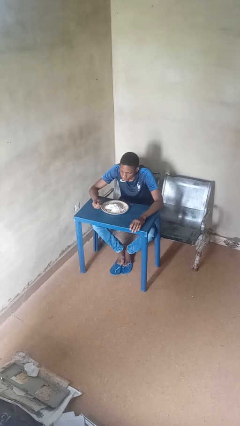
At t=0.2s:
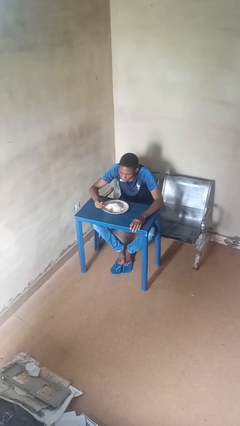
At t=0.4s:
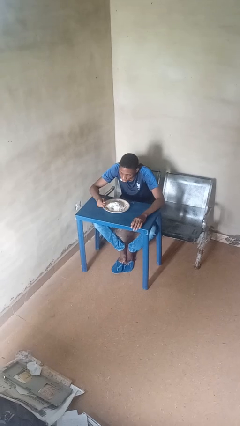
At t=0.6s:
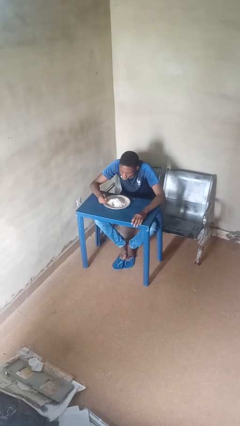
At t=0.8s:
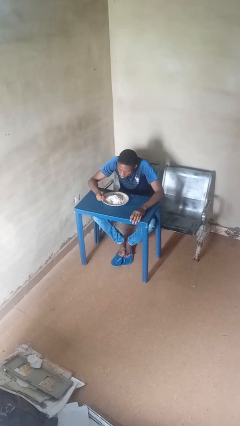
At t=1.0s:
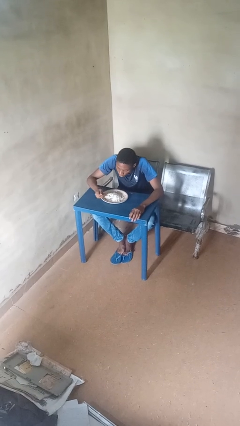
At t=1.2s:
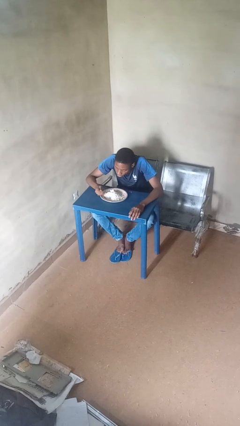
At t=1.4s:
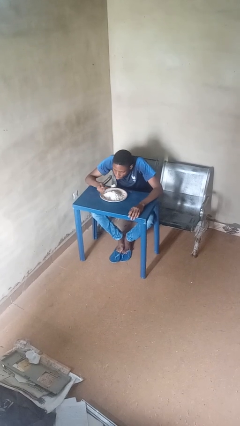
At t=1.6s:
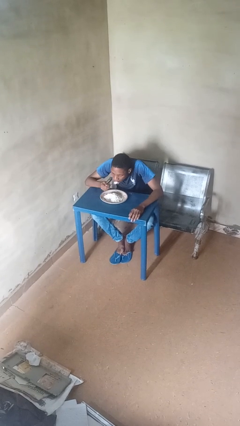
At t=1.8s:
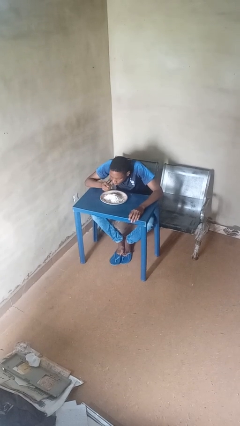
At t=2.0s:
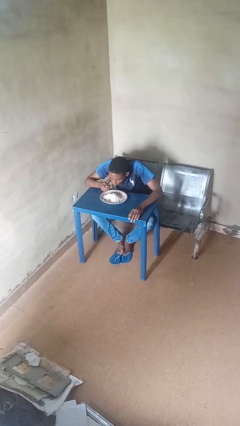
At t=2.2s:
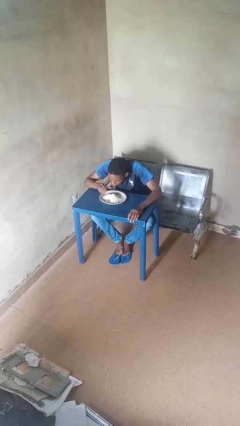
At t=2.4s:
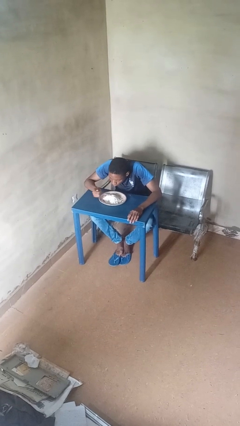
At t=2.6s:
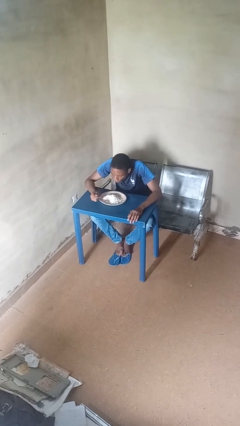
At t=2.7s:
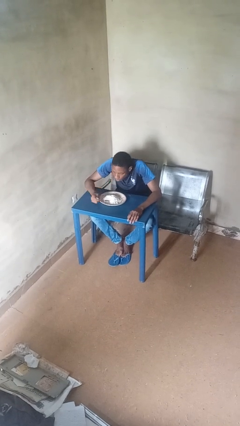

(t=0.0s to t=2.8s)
person eats with utensil

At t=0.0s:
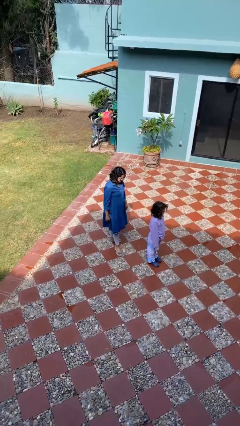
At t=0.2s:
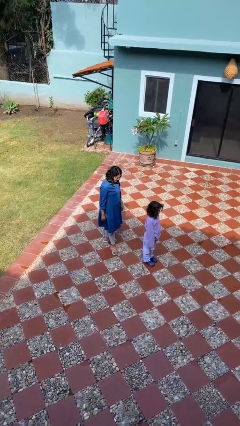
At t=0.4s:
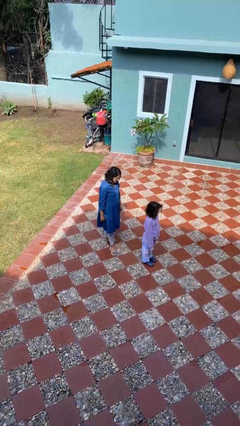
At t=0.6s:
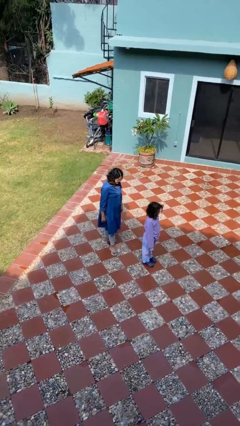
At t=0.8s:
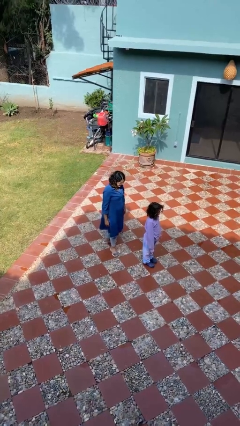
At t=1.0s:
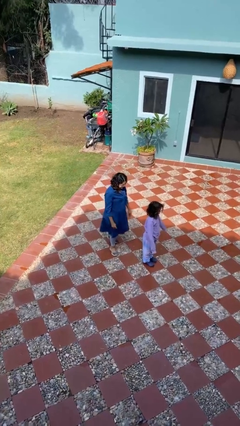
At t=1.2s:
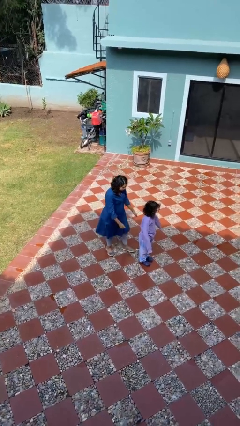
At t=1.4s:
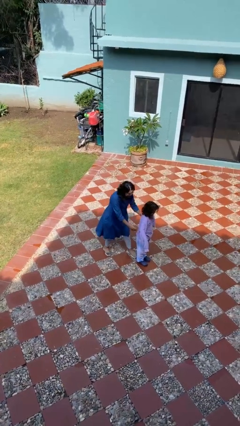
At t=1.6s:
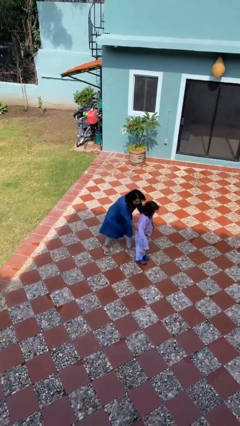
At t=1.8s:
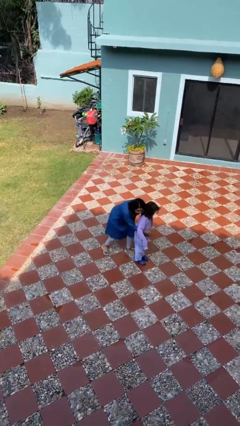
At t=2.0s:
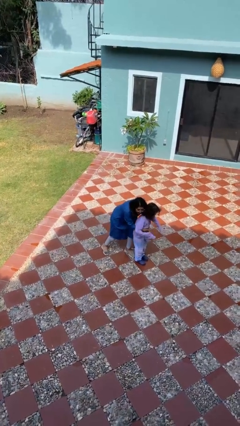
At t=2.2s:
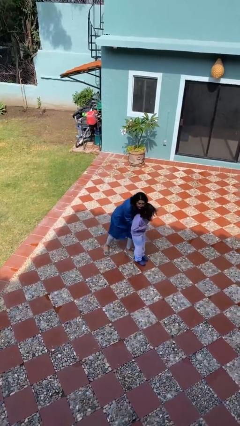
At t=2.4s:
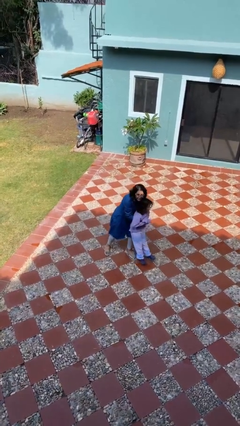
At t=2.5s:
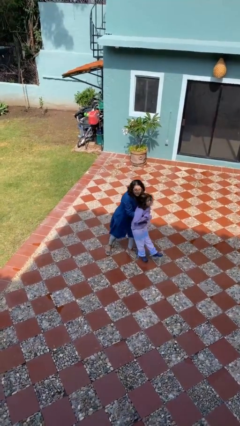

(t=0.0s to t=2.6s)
person picks up person

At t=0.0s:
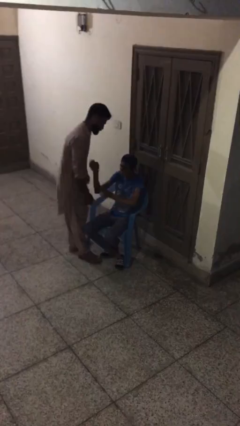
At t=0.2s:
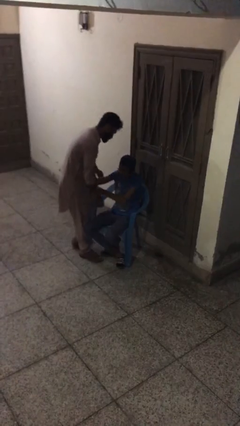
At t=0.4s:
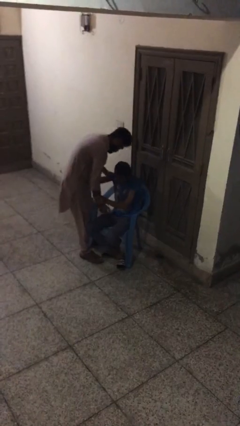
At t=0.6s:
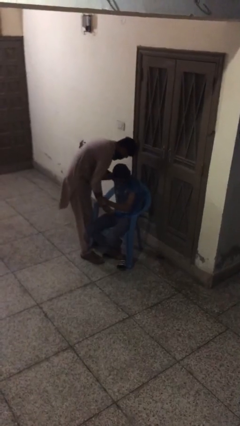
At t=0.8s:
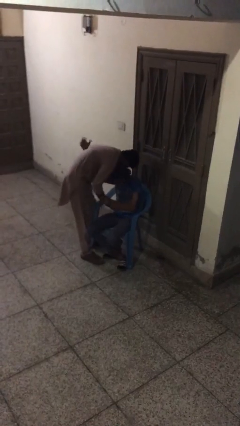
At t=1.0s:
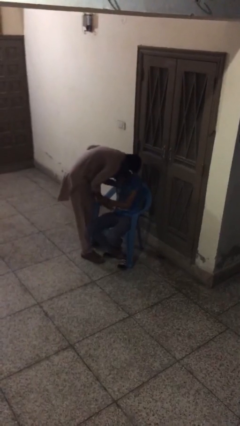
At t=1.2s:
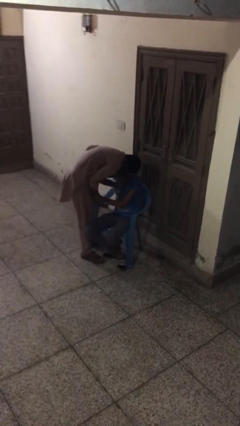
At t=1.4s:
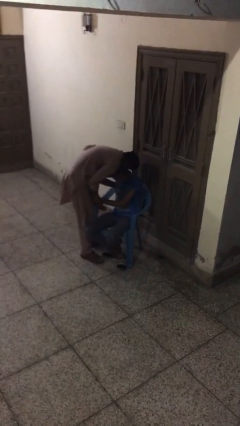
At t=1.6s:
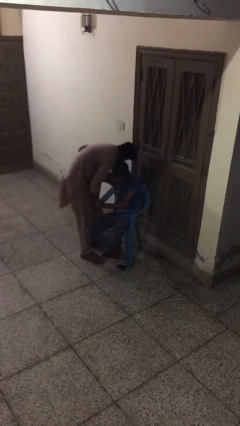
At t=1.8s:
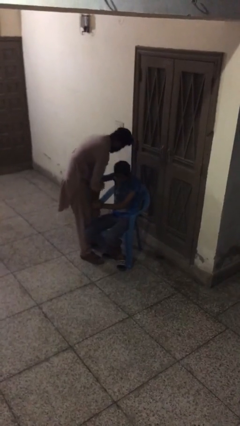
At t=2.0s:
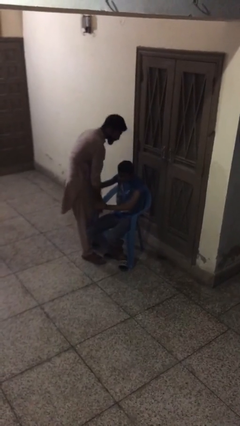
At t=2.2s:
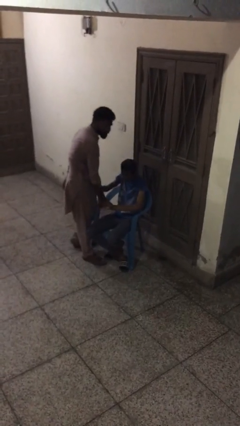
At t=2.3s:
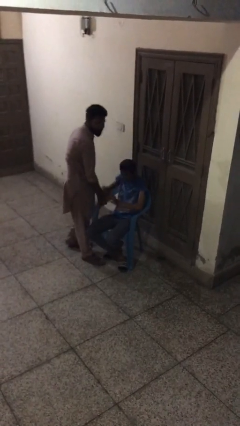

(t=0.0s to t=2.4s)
person embraces person

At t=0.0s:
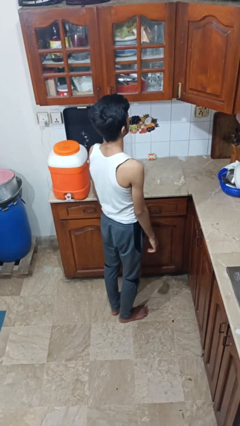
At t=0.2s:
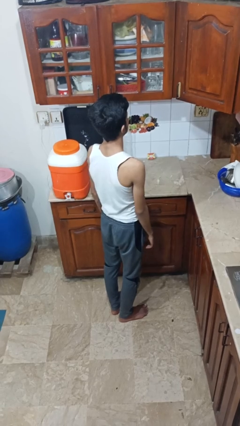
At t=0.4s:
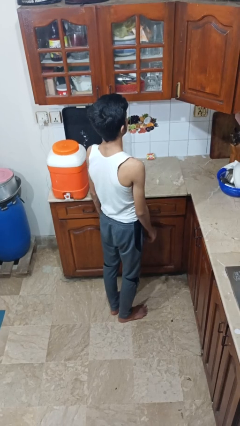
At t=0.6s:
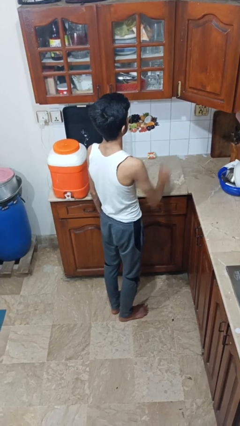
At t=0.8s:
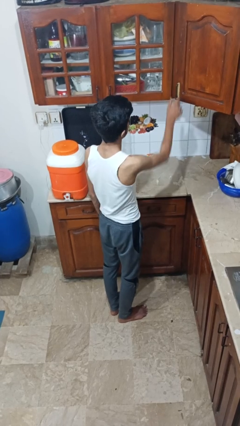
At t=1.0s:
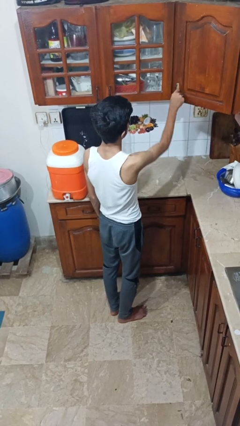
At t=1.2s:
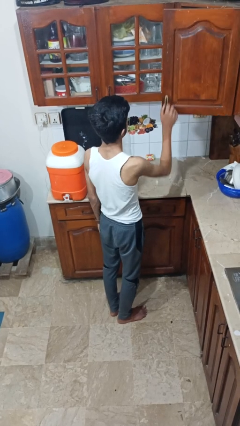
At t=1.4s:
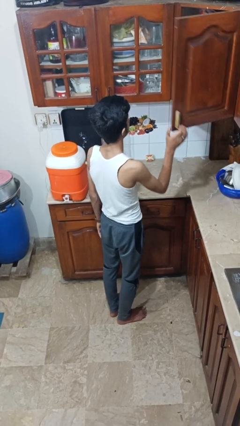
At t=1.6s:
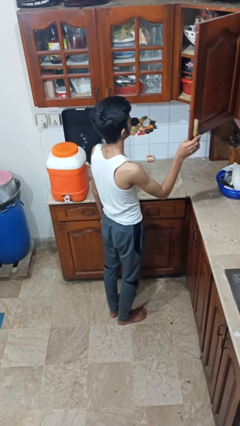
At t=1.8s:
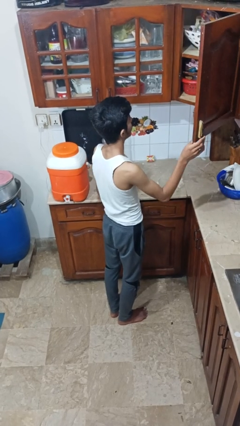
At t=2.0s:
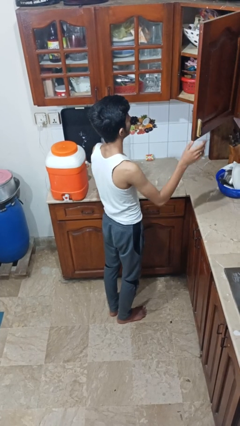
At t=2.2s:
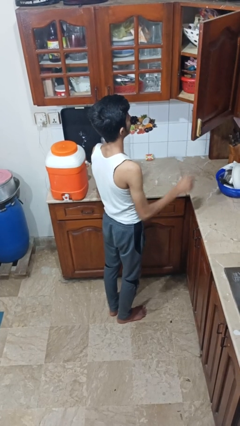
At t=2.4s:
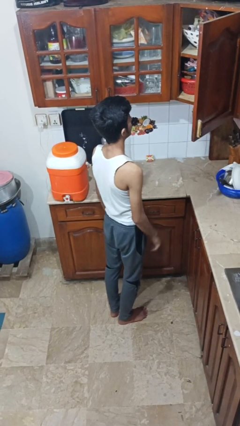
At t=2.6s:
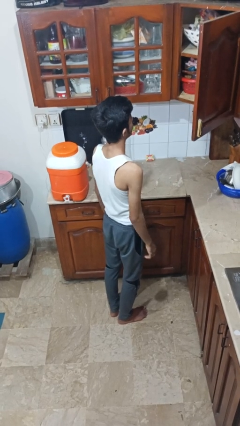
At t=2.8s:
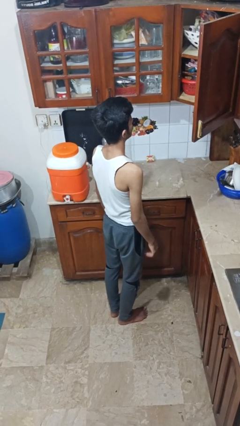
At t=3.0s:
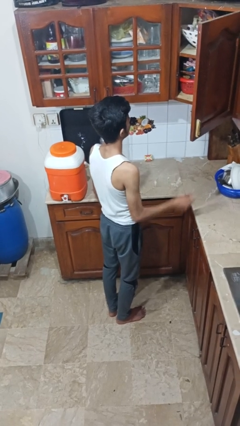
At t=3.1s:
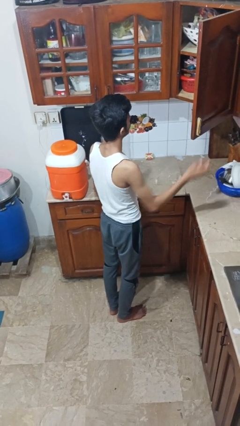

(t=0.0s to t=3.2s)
person closes cabinet

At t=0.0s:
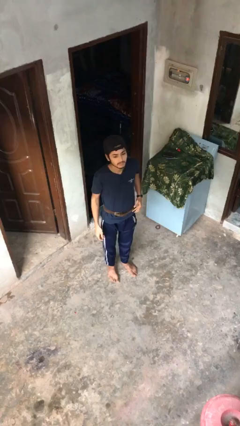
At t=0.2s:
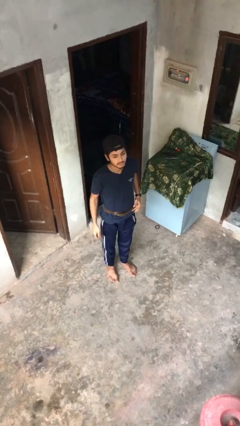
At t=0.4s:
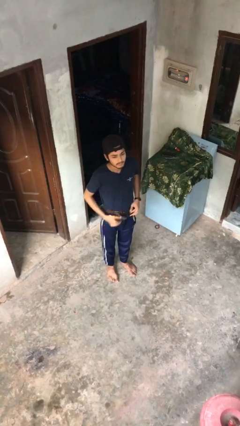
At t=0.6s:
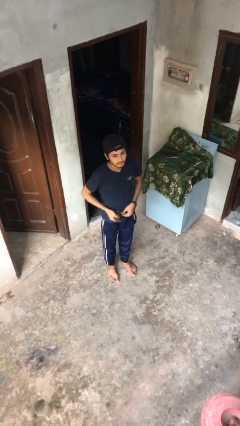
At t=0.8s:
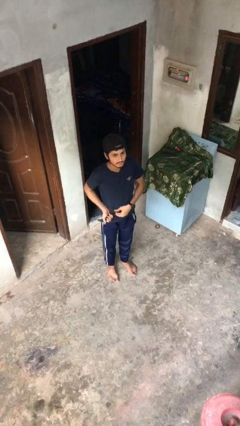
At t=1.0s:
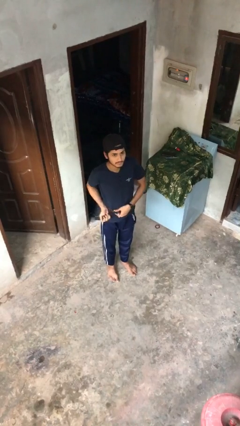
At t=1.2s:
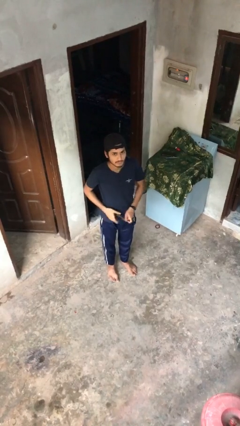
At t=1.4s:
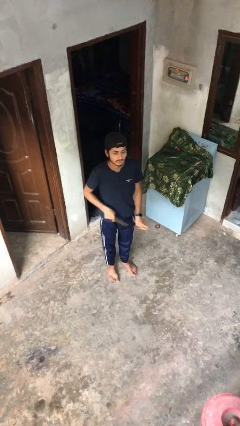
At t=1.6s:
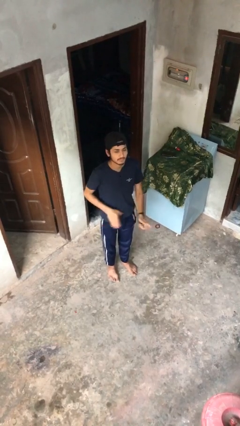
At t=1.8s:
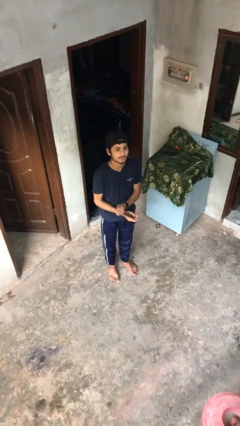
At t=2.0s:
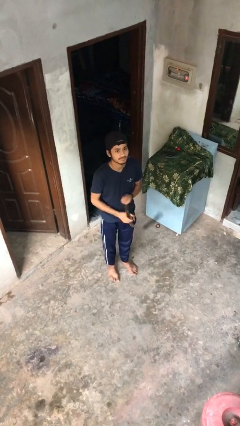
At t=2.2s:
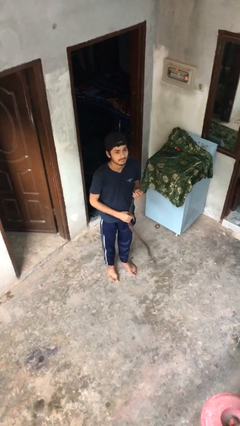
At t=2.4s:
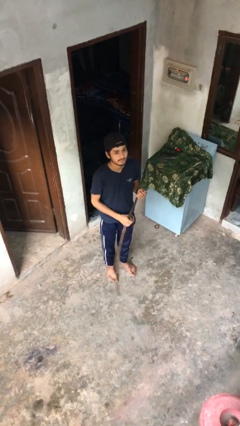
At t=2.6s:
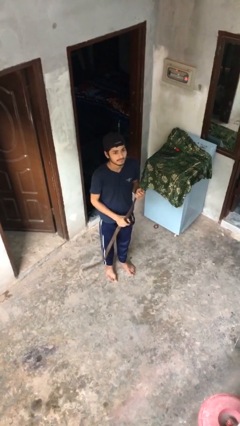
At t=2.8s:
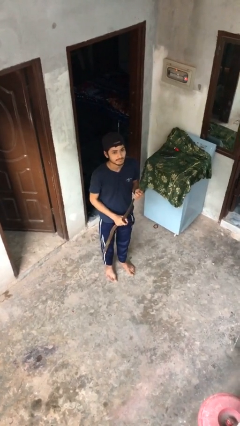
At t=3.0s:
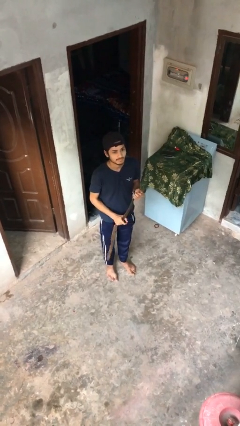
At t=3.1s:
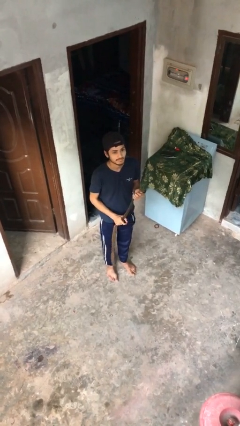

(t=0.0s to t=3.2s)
person takes off belt

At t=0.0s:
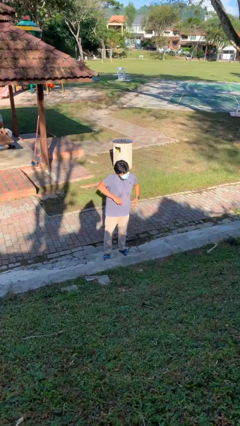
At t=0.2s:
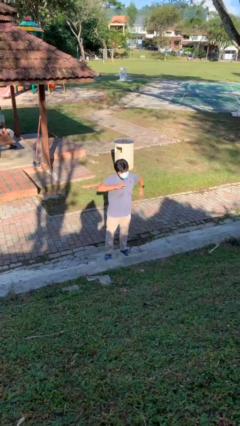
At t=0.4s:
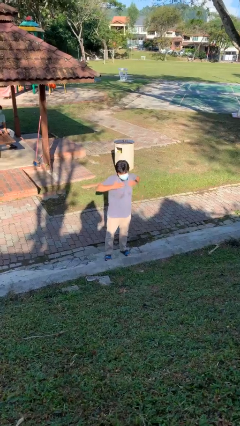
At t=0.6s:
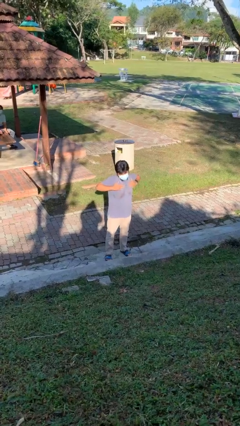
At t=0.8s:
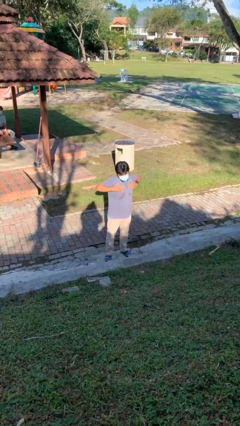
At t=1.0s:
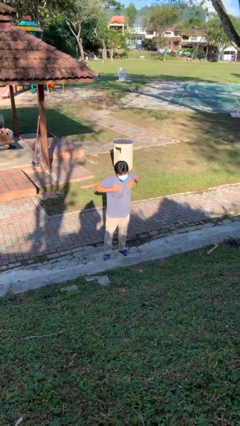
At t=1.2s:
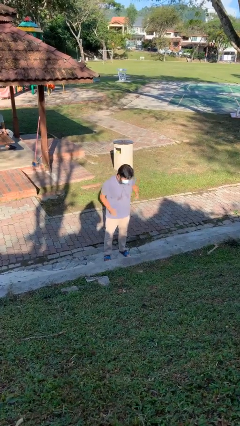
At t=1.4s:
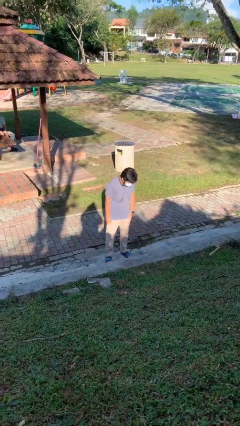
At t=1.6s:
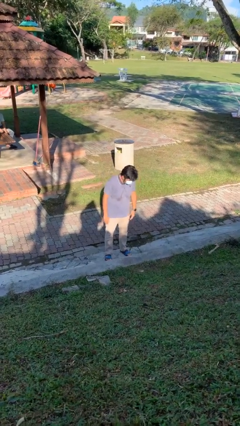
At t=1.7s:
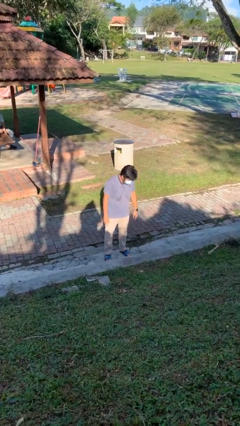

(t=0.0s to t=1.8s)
person drums on chest

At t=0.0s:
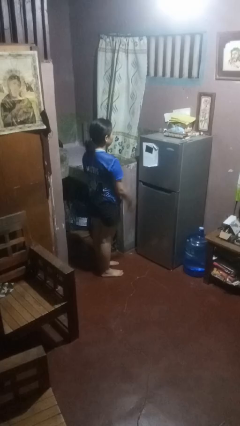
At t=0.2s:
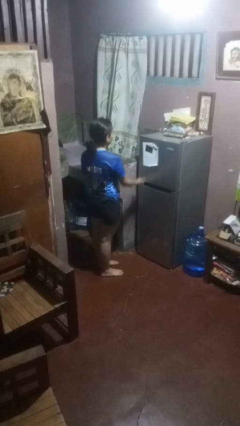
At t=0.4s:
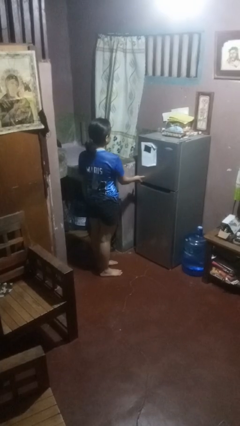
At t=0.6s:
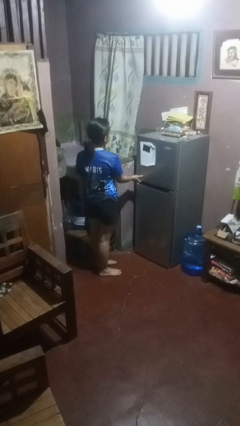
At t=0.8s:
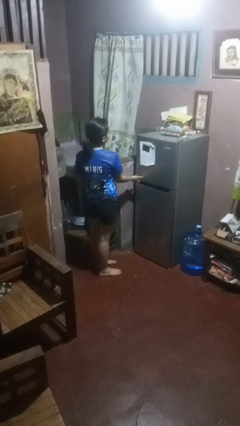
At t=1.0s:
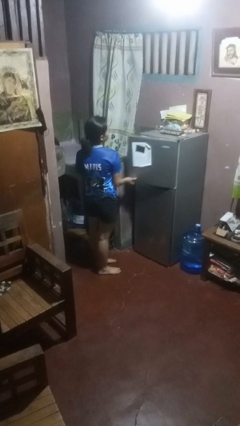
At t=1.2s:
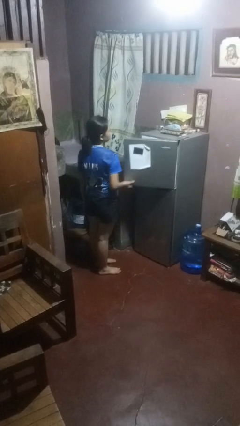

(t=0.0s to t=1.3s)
person opens refrigerator
